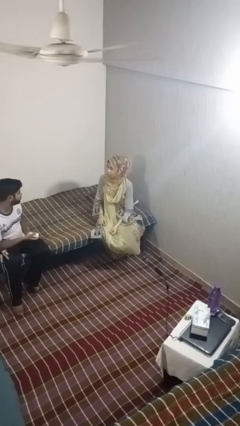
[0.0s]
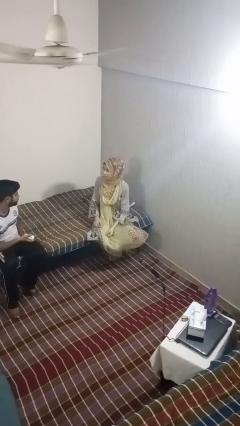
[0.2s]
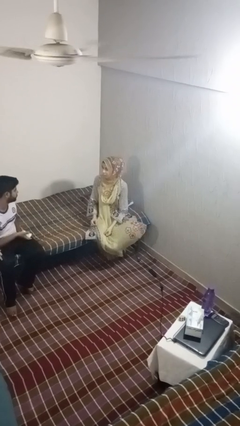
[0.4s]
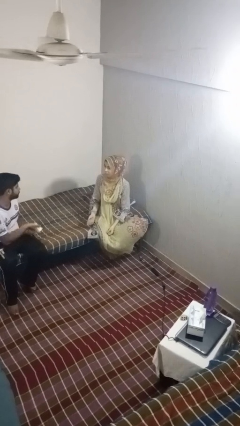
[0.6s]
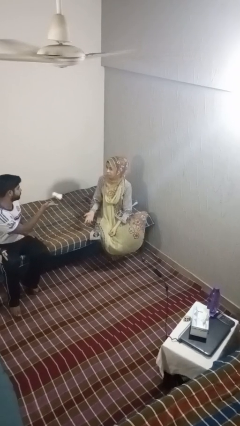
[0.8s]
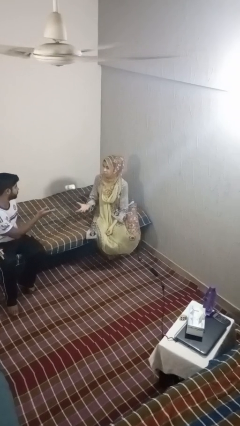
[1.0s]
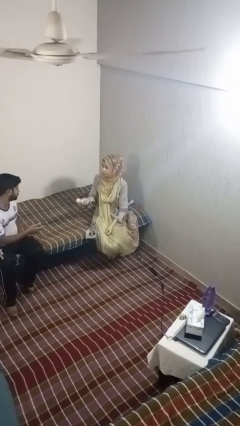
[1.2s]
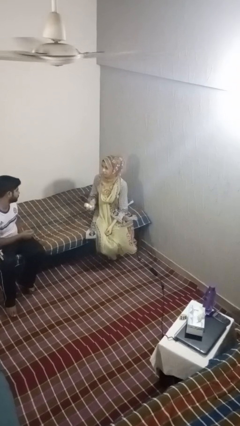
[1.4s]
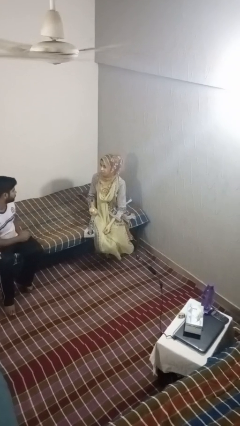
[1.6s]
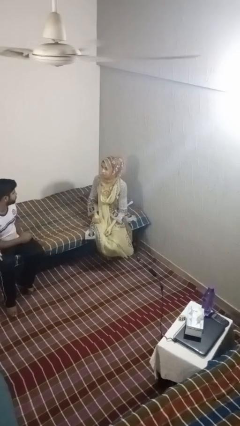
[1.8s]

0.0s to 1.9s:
person catches object from person

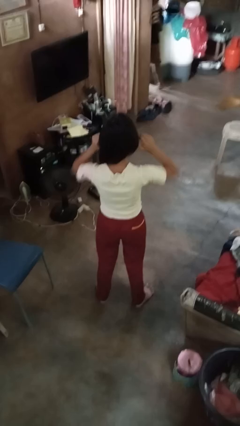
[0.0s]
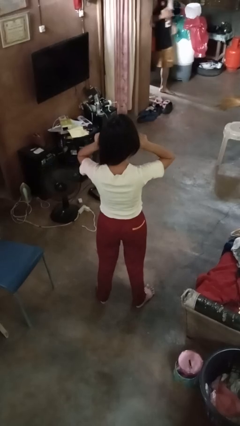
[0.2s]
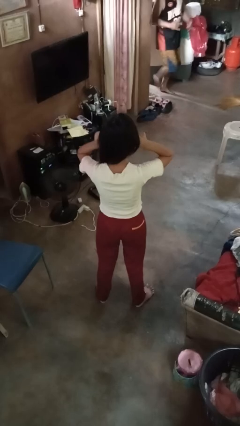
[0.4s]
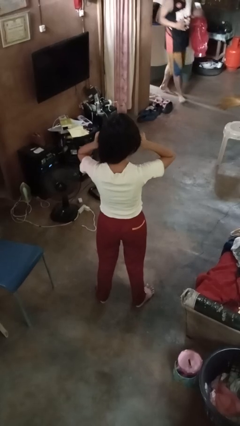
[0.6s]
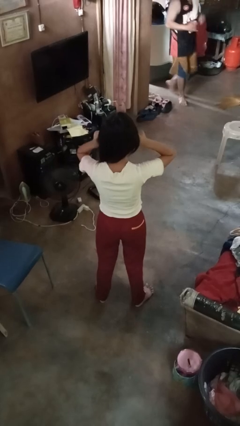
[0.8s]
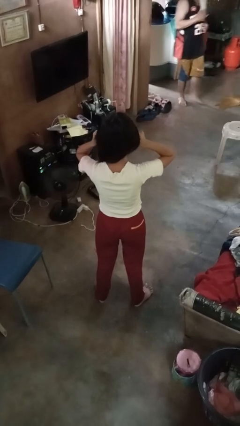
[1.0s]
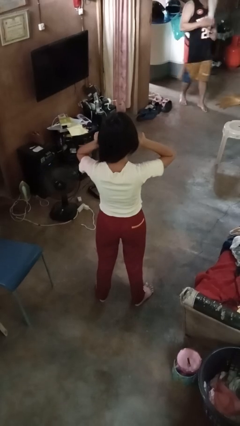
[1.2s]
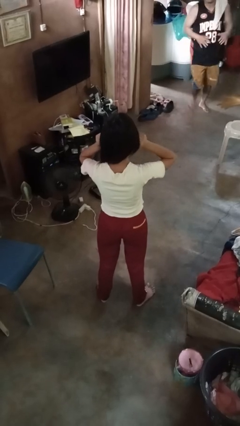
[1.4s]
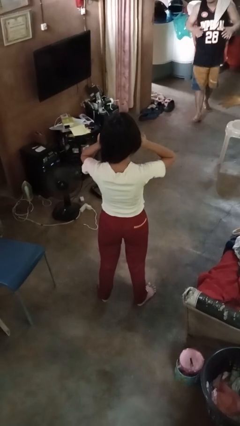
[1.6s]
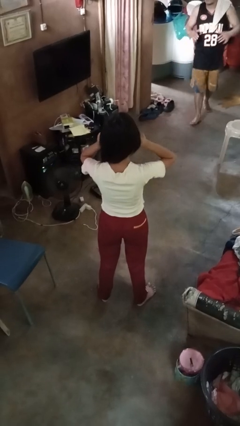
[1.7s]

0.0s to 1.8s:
person touches earlobe

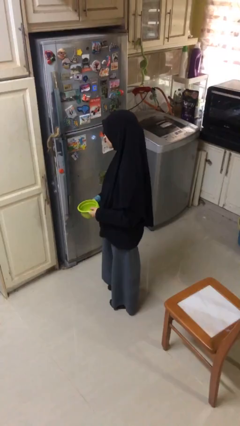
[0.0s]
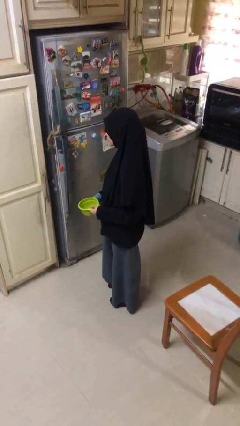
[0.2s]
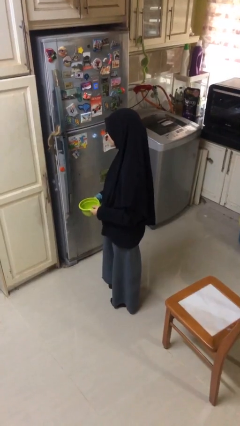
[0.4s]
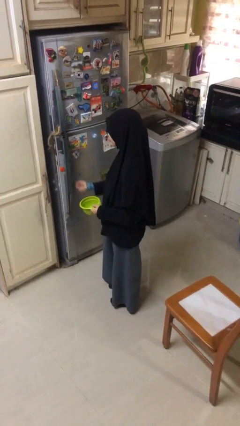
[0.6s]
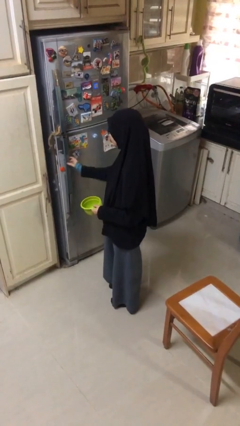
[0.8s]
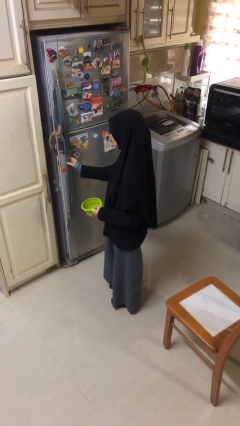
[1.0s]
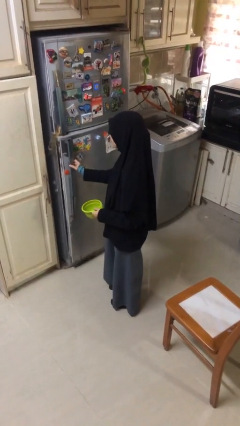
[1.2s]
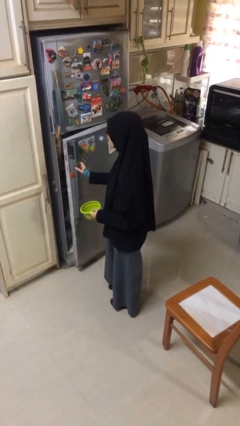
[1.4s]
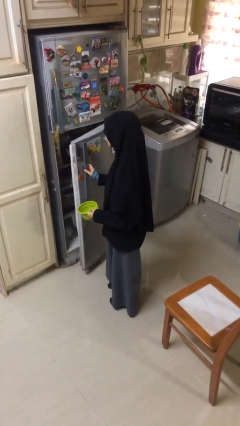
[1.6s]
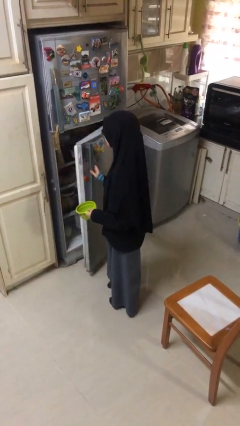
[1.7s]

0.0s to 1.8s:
person opens refrigerator

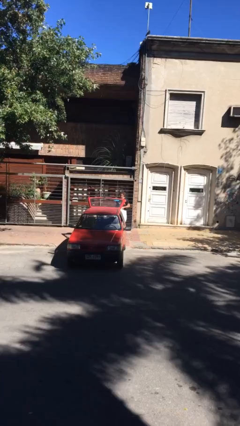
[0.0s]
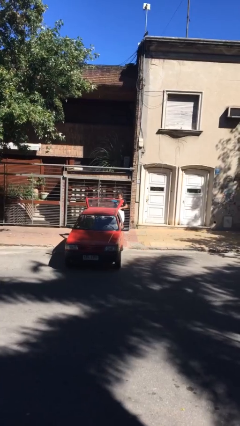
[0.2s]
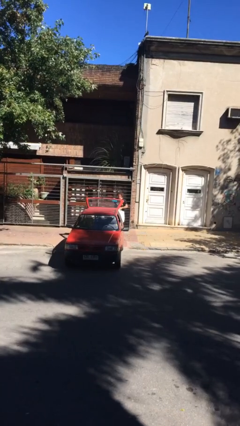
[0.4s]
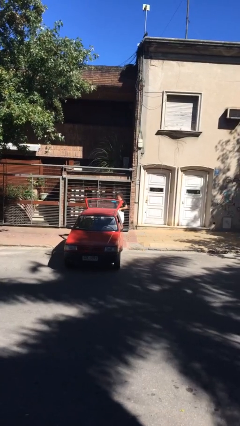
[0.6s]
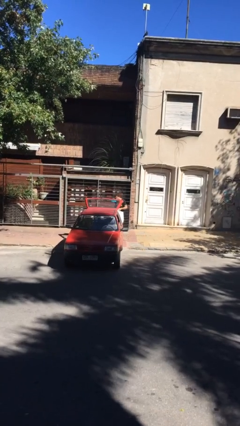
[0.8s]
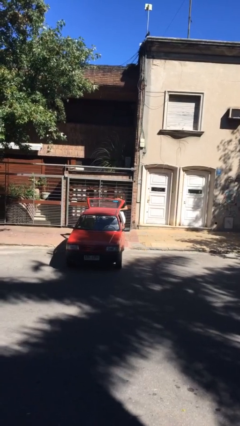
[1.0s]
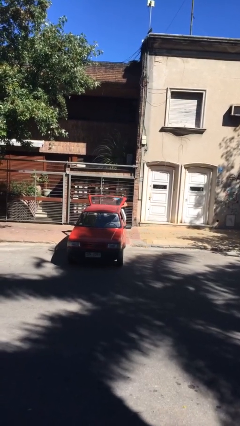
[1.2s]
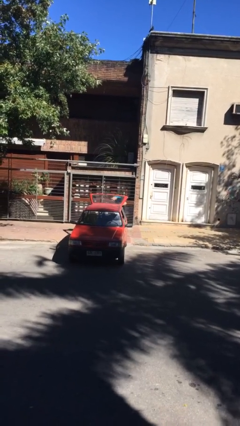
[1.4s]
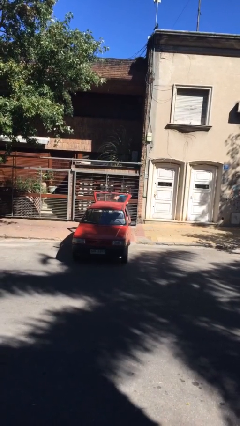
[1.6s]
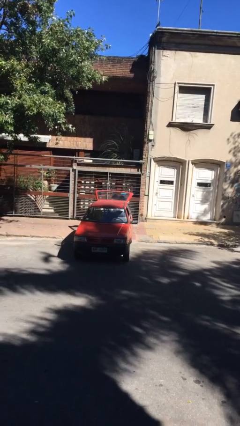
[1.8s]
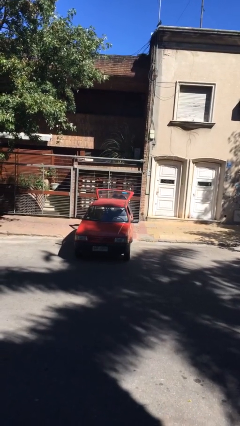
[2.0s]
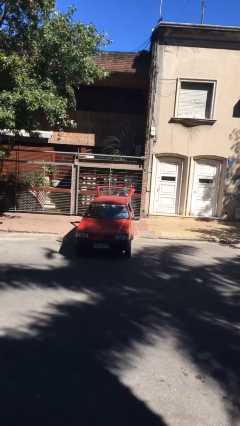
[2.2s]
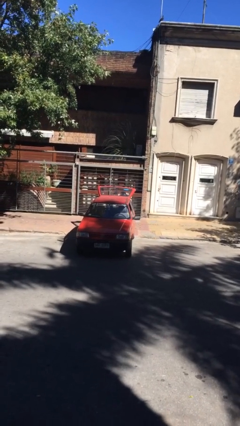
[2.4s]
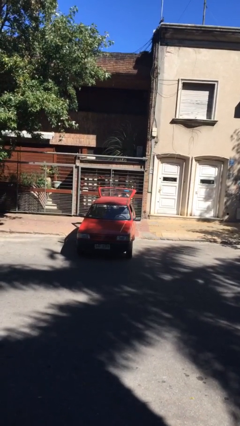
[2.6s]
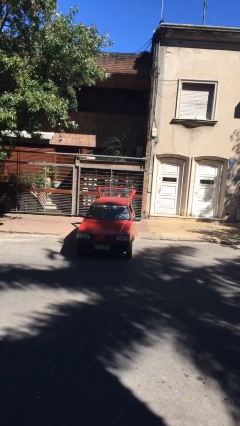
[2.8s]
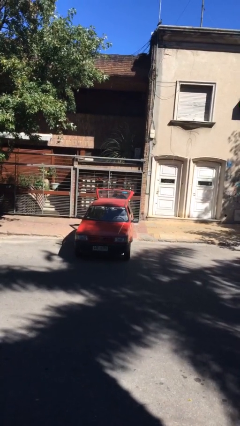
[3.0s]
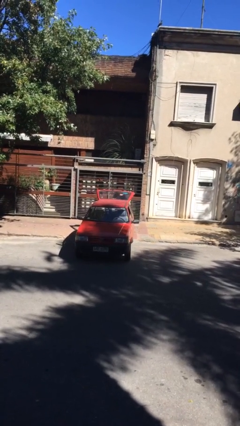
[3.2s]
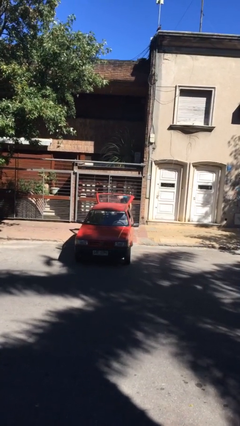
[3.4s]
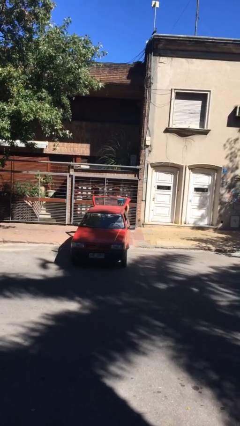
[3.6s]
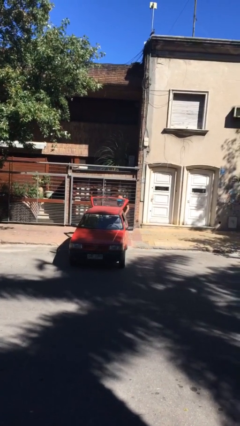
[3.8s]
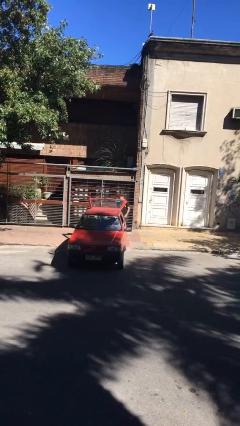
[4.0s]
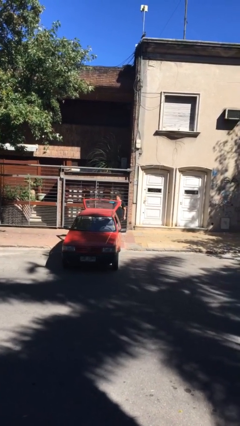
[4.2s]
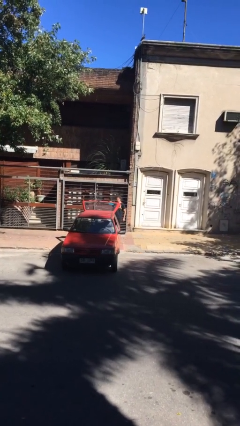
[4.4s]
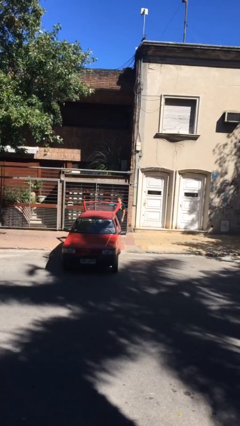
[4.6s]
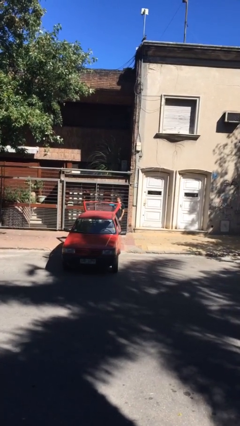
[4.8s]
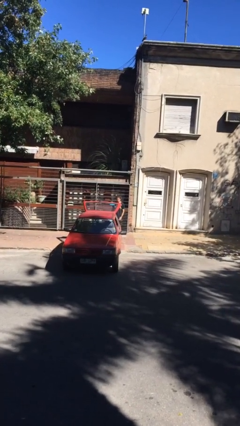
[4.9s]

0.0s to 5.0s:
person loads car

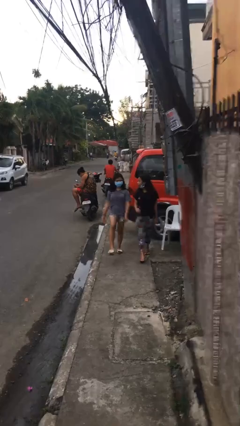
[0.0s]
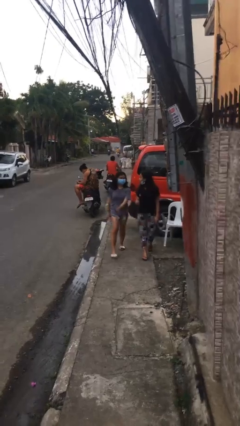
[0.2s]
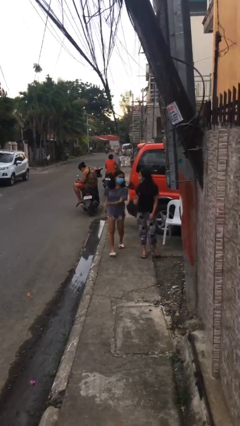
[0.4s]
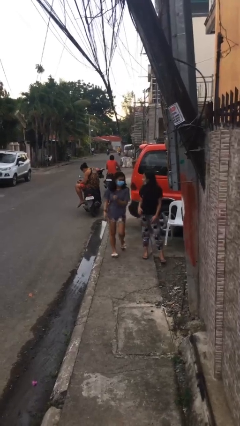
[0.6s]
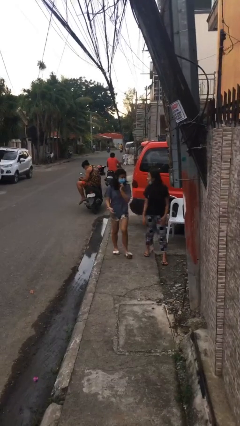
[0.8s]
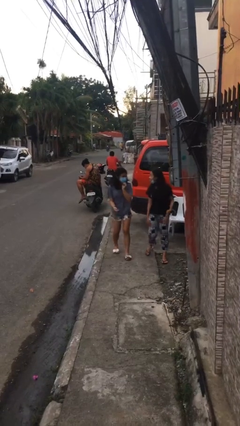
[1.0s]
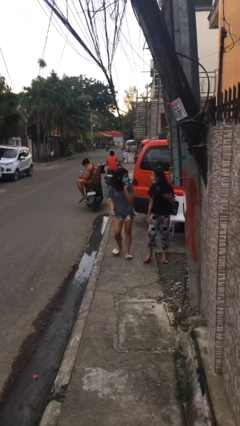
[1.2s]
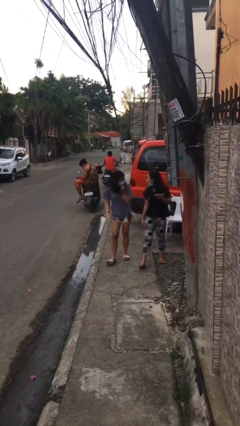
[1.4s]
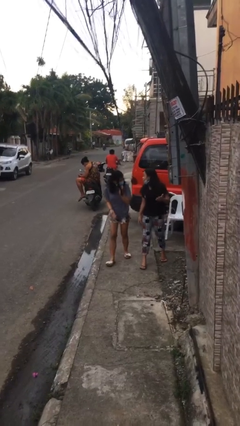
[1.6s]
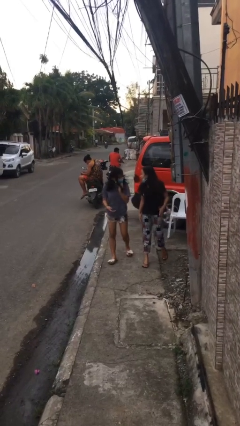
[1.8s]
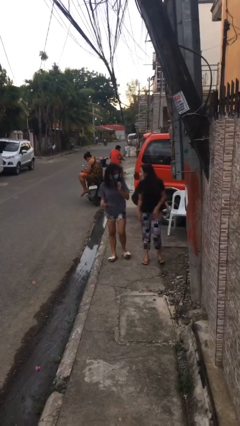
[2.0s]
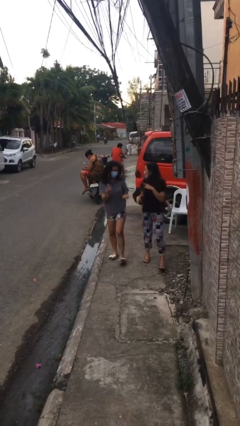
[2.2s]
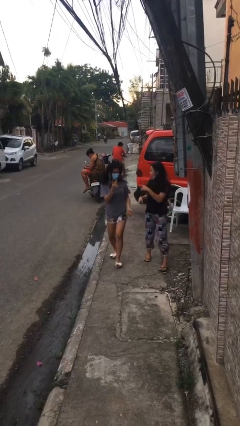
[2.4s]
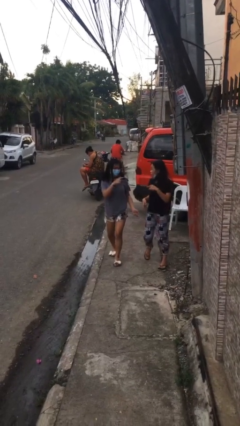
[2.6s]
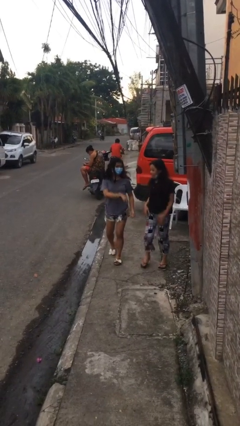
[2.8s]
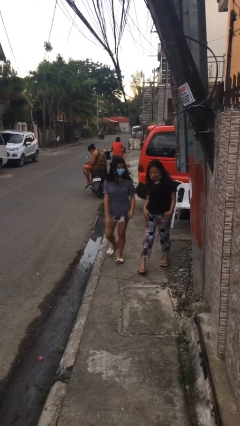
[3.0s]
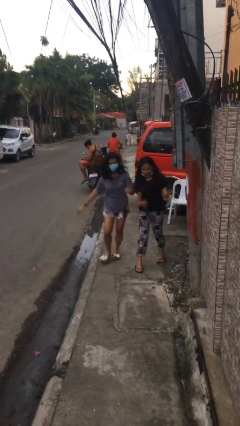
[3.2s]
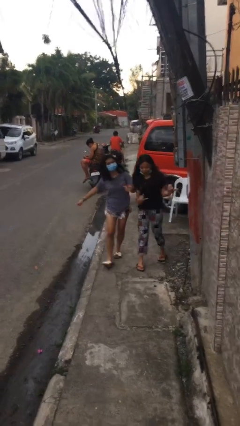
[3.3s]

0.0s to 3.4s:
person talks to person

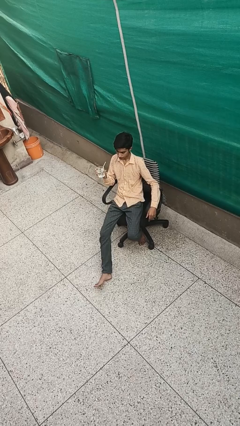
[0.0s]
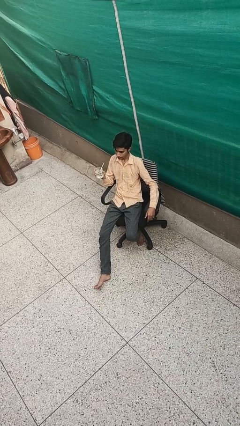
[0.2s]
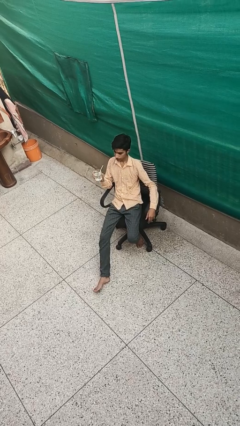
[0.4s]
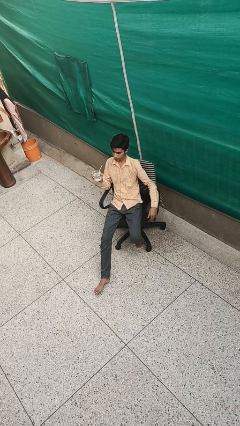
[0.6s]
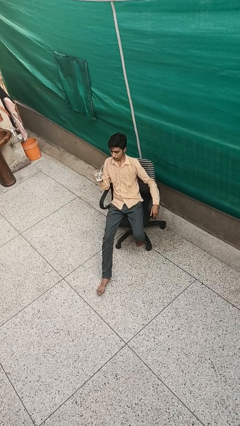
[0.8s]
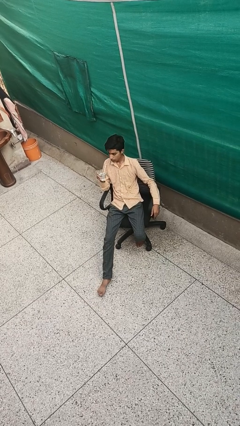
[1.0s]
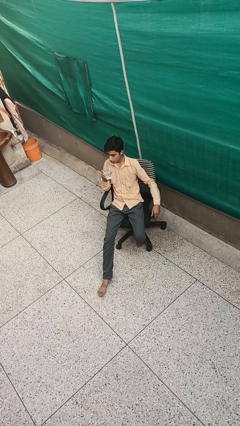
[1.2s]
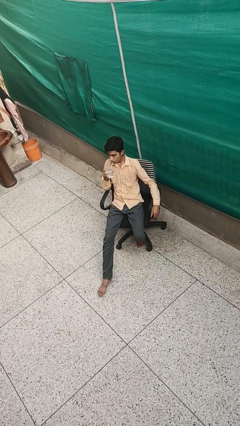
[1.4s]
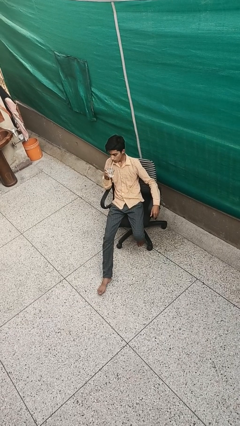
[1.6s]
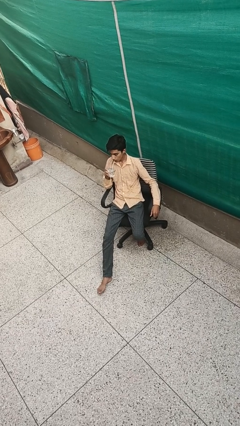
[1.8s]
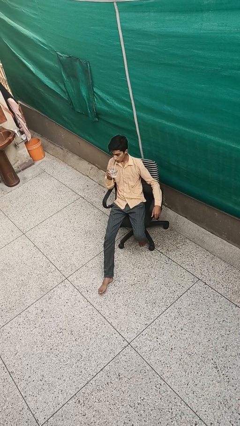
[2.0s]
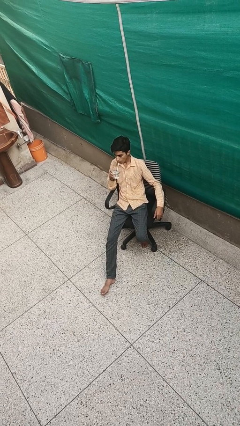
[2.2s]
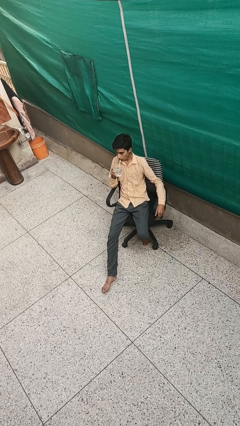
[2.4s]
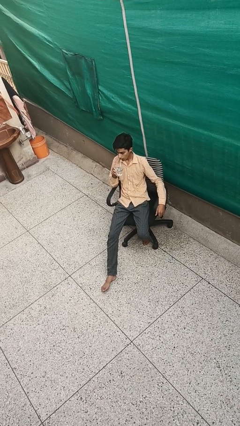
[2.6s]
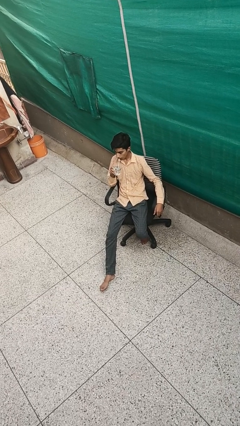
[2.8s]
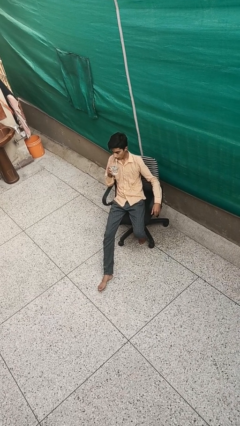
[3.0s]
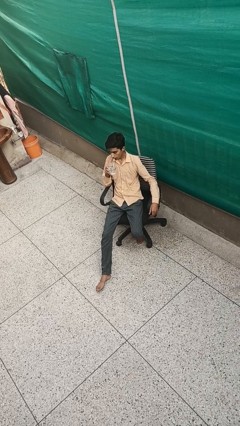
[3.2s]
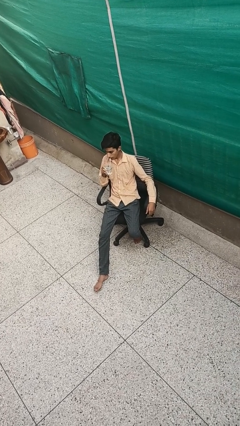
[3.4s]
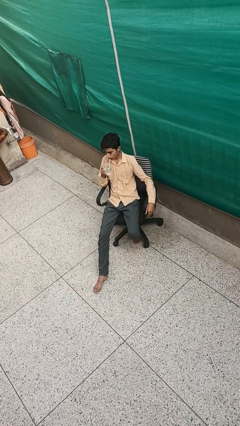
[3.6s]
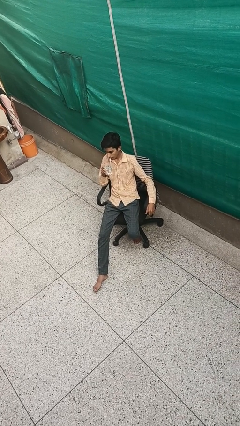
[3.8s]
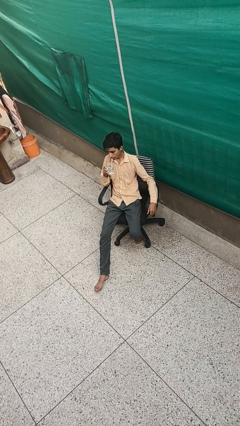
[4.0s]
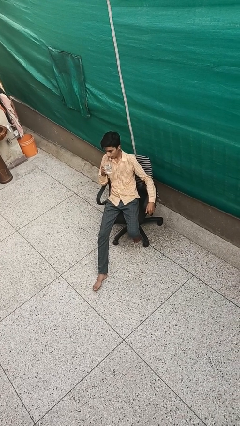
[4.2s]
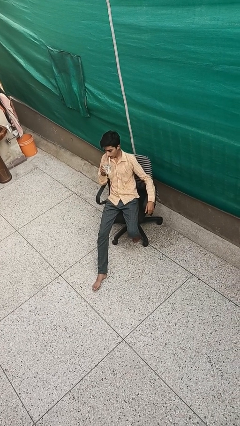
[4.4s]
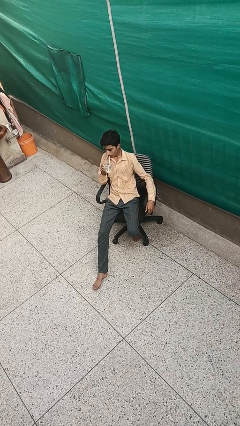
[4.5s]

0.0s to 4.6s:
person drinks from straw
